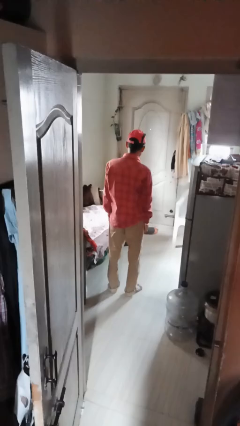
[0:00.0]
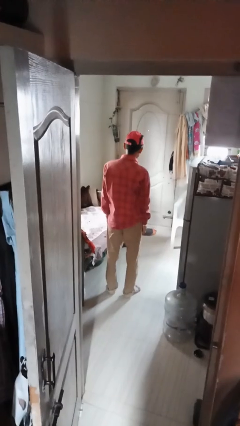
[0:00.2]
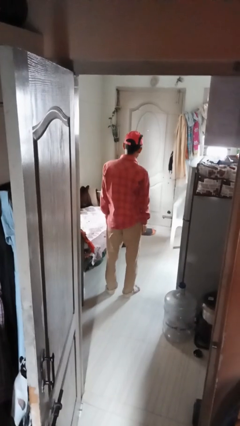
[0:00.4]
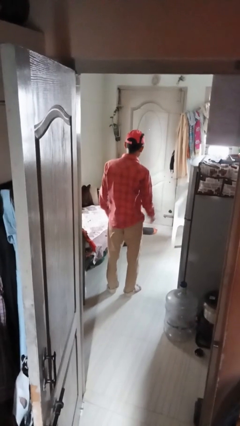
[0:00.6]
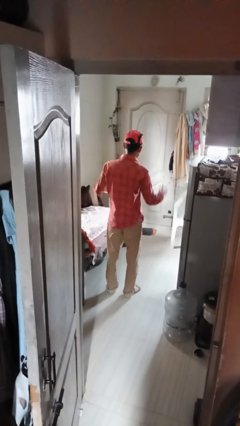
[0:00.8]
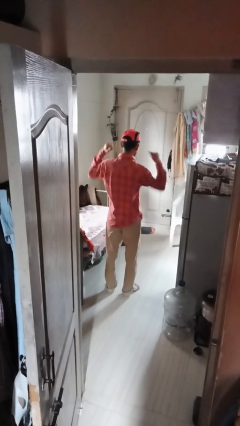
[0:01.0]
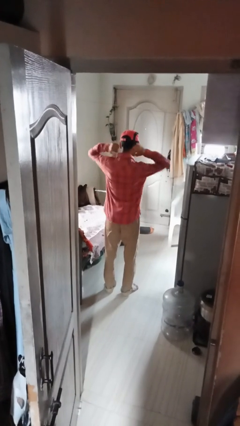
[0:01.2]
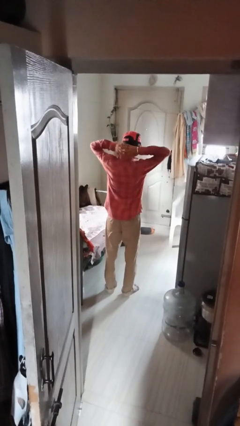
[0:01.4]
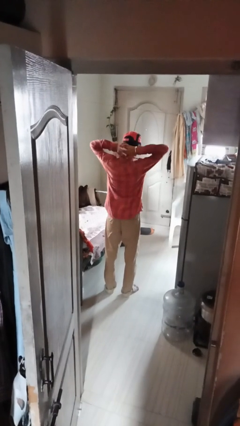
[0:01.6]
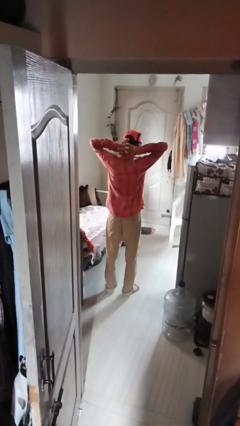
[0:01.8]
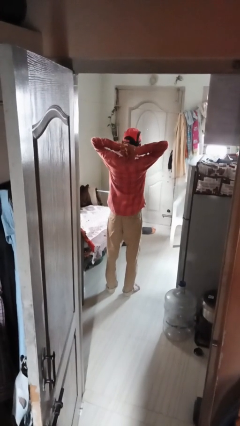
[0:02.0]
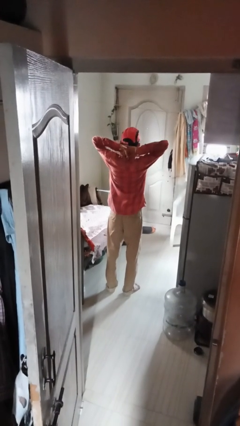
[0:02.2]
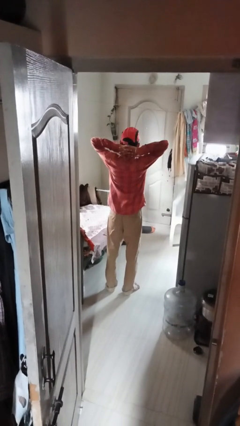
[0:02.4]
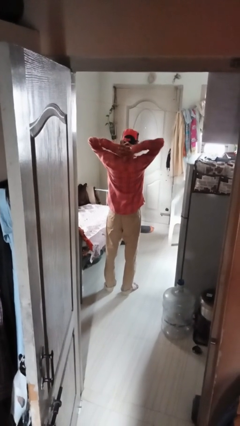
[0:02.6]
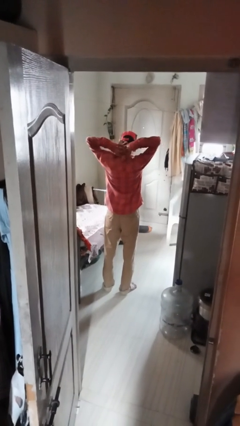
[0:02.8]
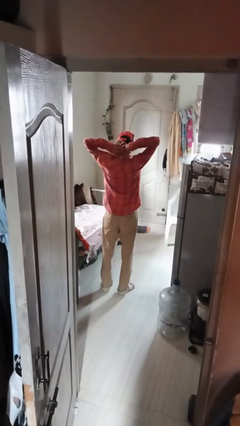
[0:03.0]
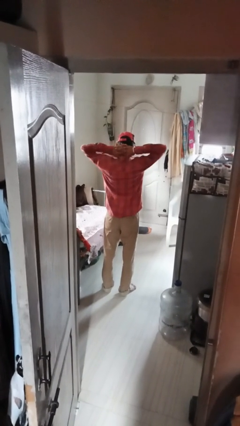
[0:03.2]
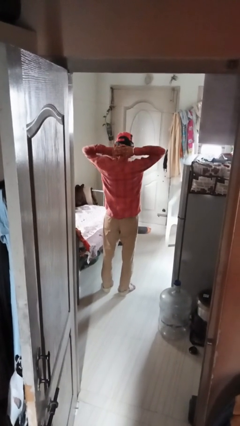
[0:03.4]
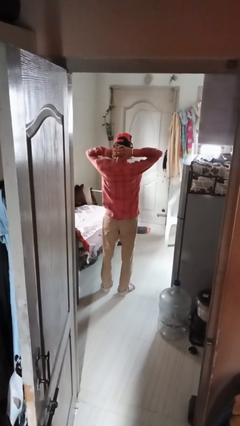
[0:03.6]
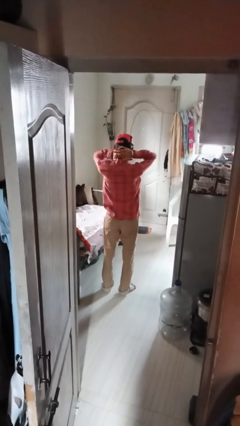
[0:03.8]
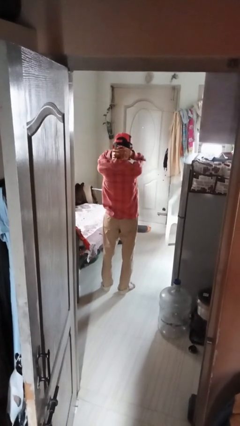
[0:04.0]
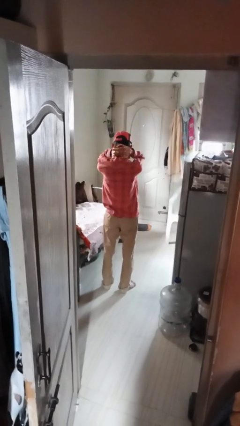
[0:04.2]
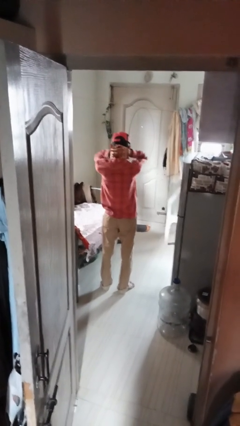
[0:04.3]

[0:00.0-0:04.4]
person cracks knuckles

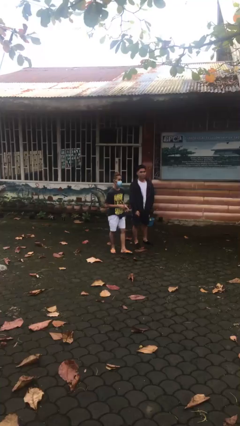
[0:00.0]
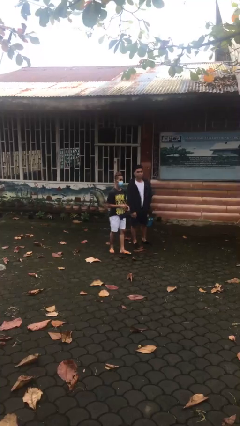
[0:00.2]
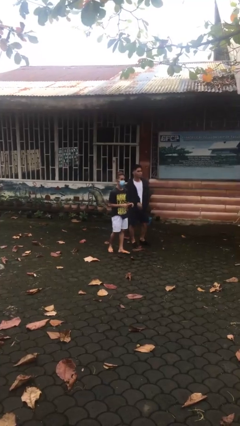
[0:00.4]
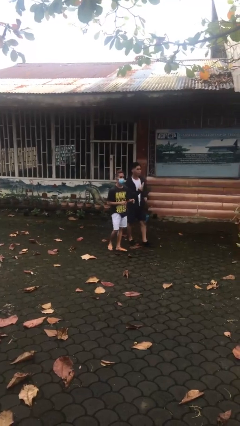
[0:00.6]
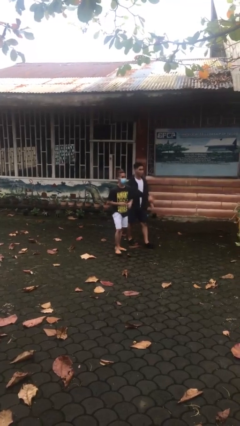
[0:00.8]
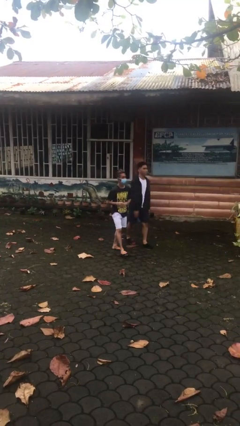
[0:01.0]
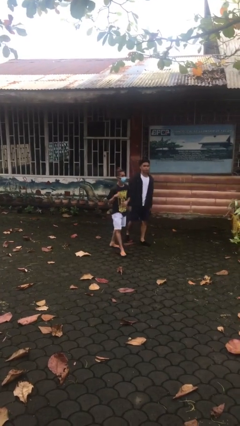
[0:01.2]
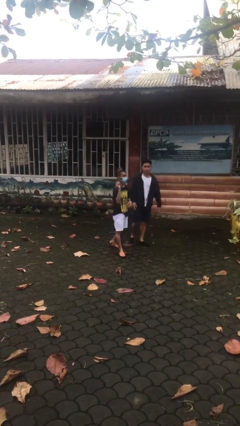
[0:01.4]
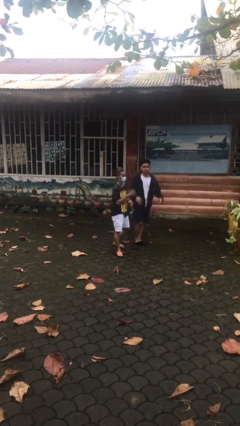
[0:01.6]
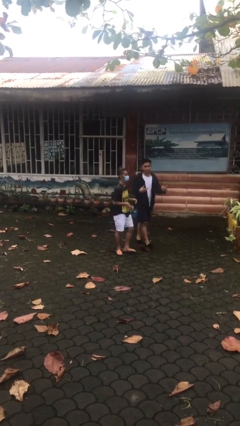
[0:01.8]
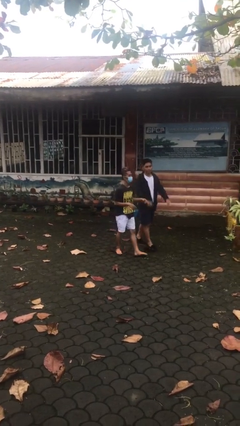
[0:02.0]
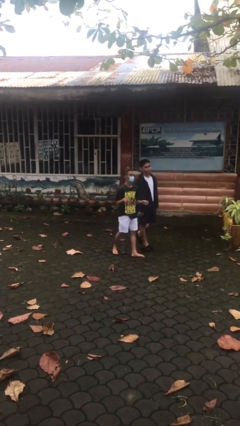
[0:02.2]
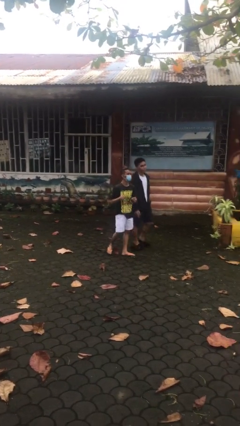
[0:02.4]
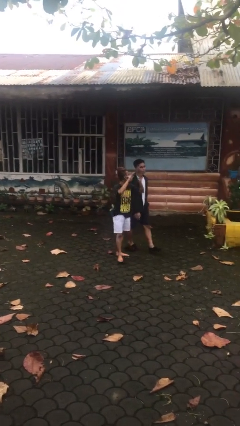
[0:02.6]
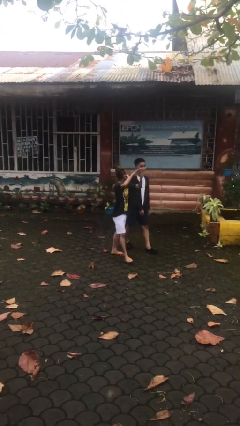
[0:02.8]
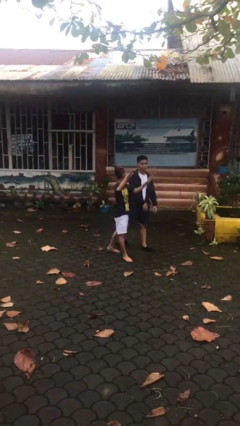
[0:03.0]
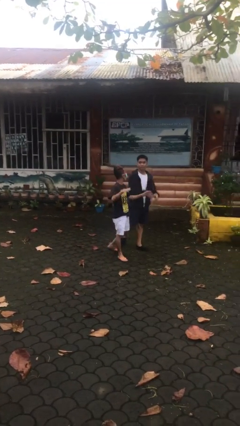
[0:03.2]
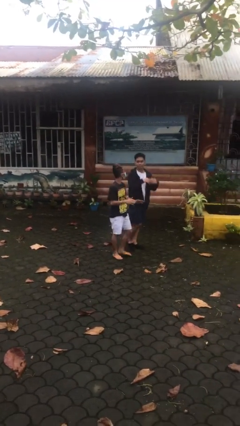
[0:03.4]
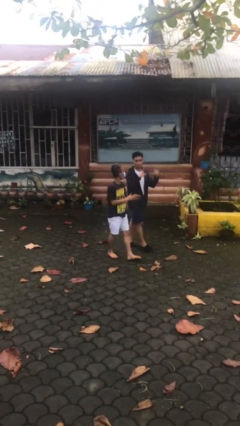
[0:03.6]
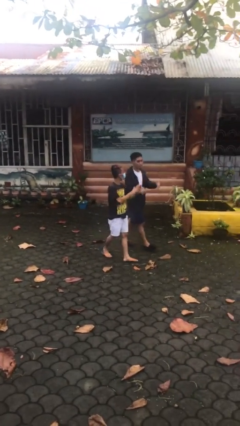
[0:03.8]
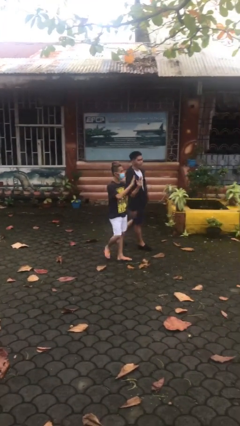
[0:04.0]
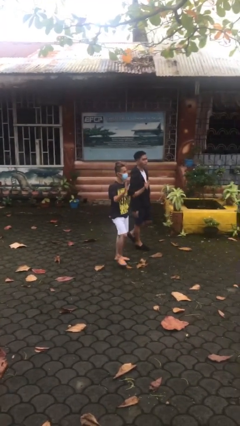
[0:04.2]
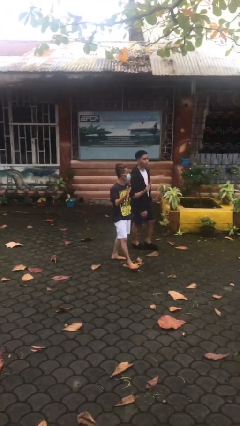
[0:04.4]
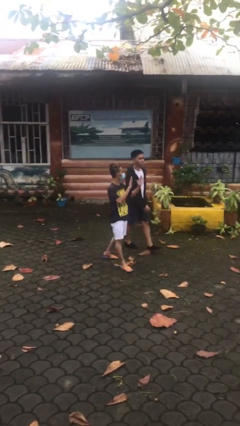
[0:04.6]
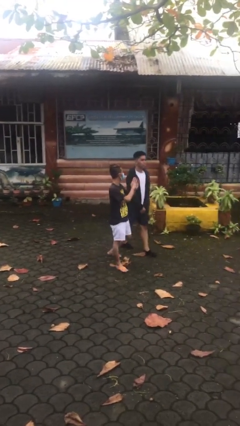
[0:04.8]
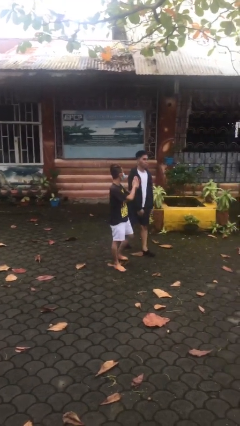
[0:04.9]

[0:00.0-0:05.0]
person talks to person

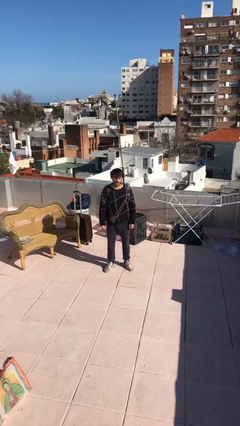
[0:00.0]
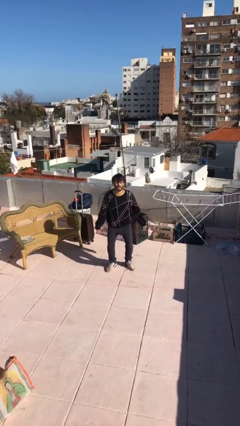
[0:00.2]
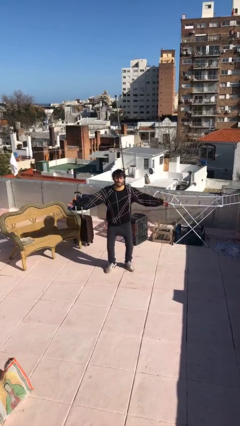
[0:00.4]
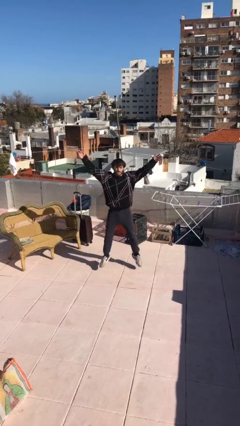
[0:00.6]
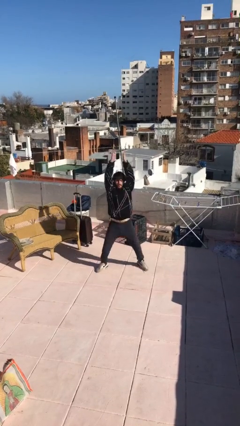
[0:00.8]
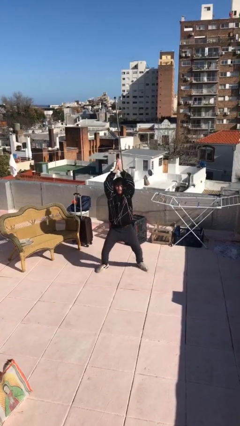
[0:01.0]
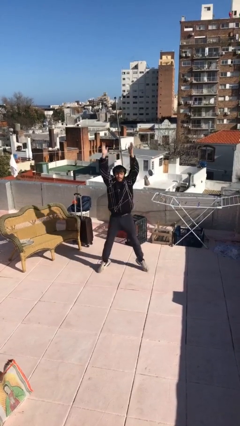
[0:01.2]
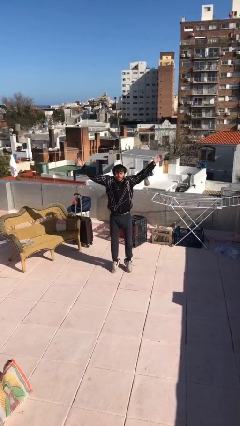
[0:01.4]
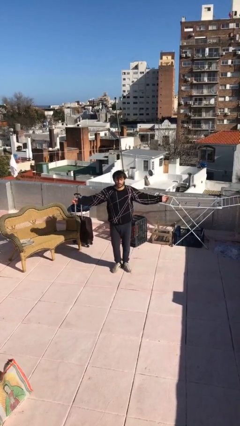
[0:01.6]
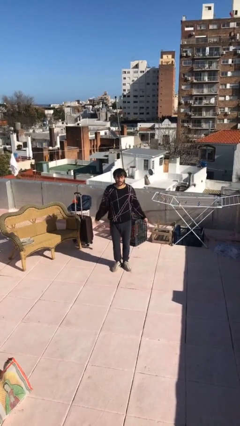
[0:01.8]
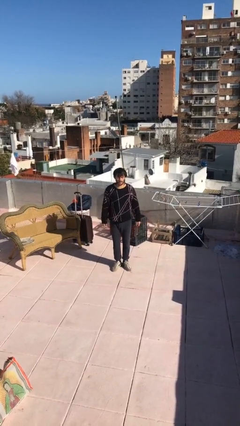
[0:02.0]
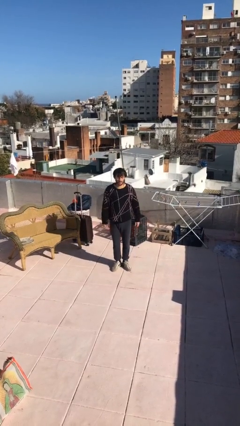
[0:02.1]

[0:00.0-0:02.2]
person exercises with jumping jacks

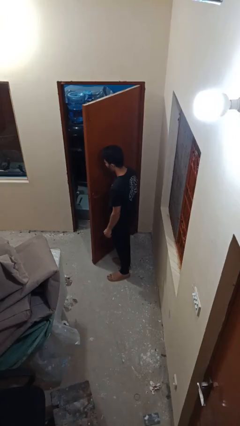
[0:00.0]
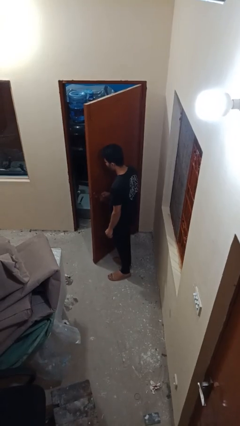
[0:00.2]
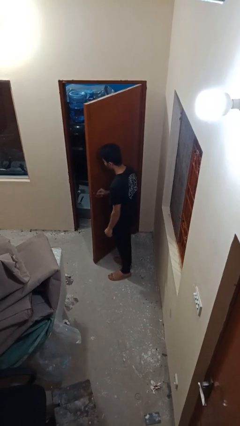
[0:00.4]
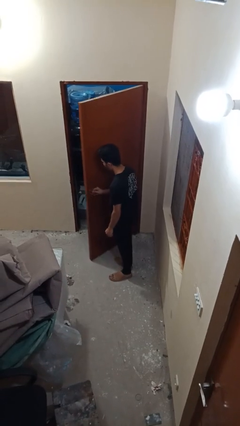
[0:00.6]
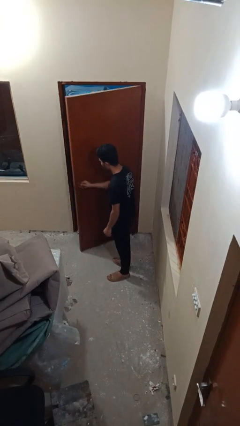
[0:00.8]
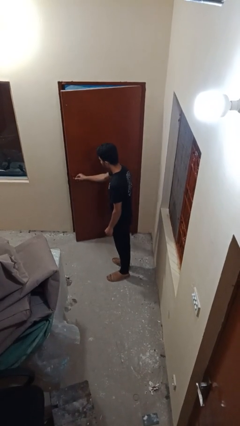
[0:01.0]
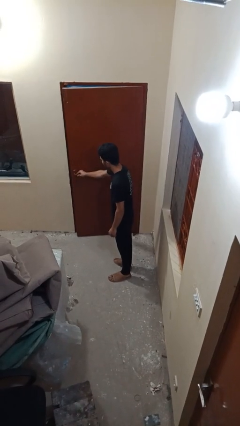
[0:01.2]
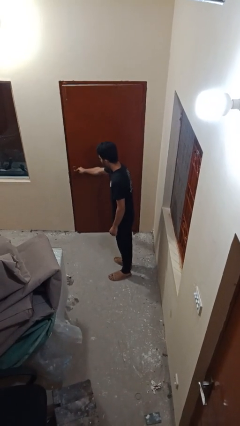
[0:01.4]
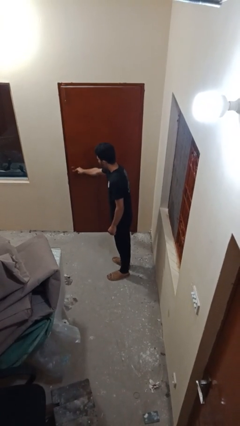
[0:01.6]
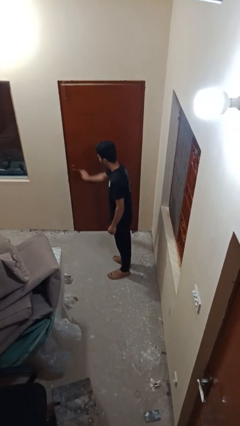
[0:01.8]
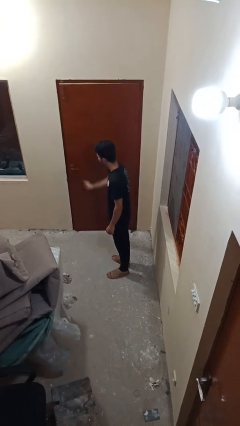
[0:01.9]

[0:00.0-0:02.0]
person closes facility door

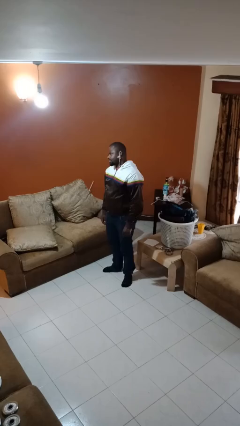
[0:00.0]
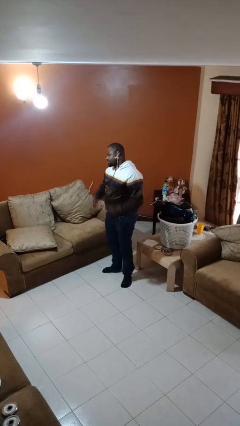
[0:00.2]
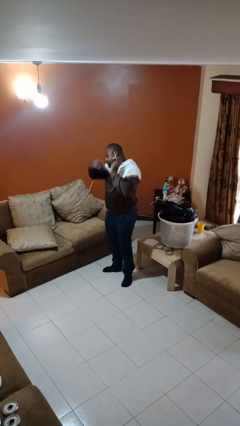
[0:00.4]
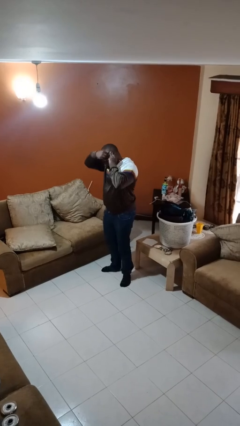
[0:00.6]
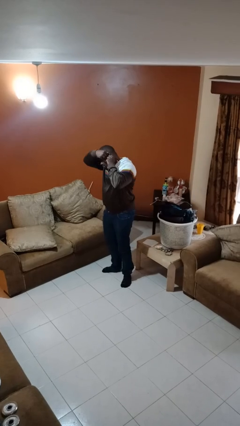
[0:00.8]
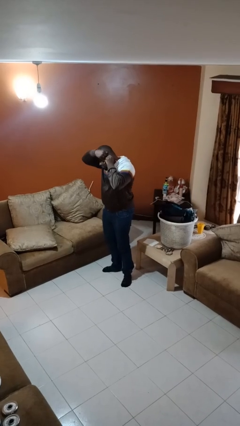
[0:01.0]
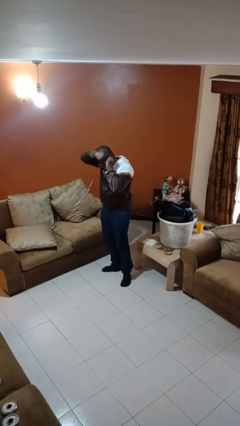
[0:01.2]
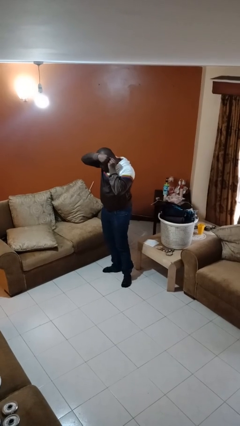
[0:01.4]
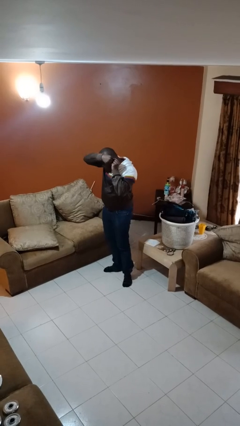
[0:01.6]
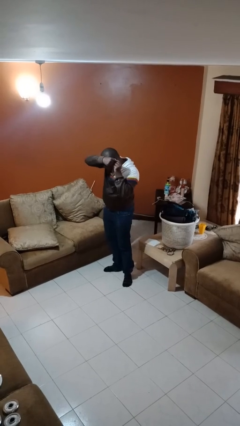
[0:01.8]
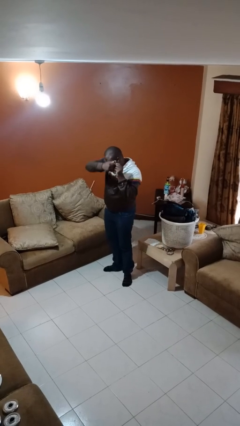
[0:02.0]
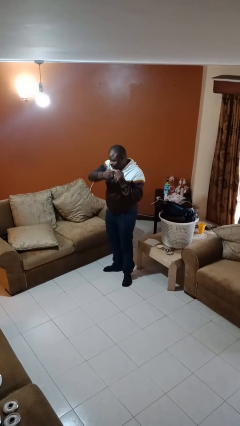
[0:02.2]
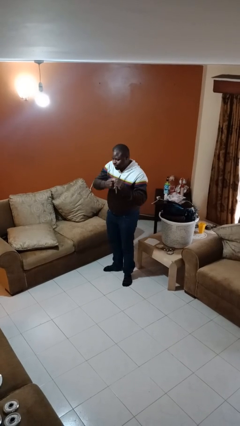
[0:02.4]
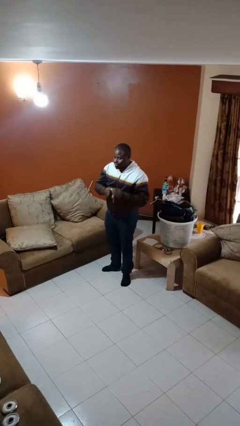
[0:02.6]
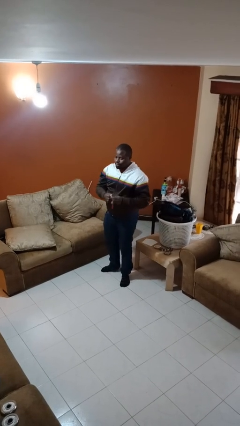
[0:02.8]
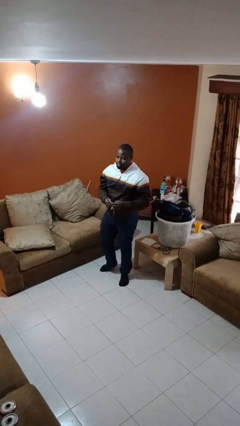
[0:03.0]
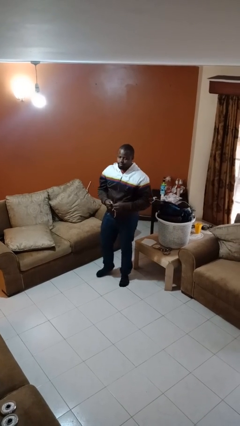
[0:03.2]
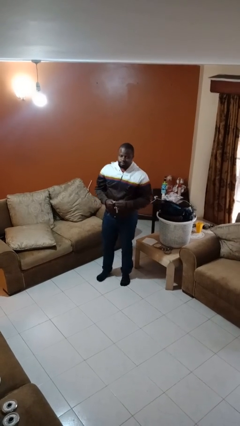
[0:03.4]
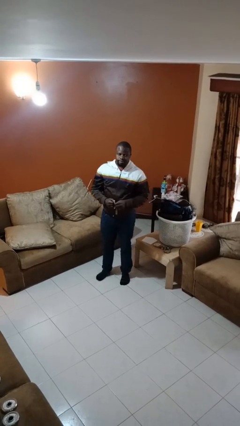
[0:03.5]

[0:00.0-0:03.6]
person takes off earrings

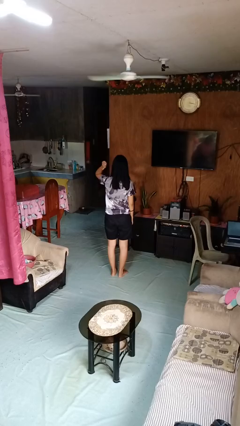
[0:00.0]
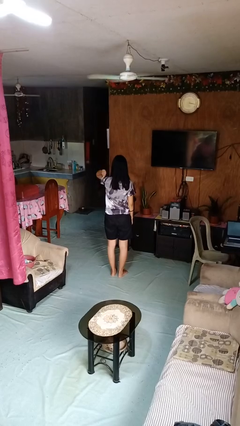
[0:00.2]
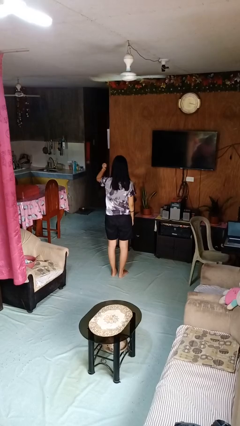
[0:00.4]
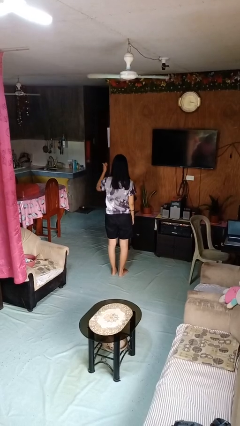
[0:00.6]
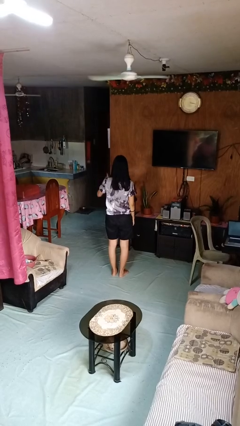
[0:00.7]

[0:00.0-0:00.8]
person gestures behind me
